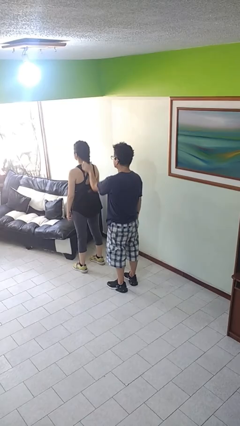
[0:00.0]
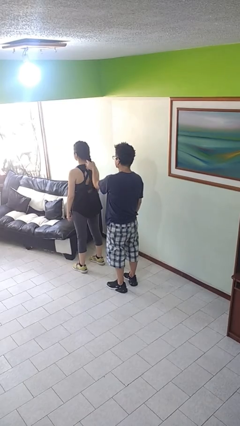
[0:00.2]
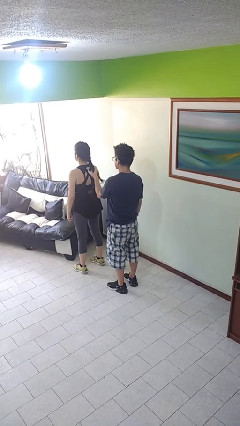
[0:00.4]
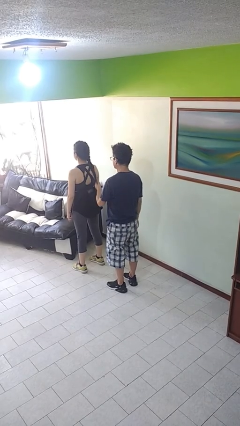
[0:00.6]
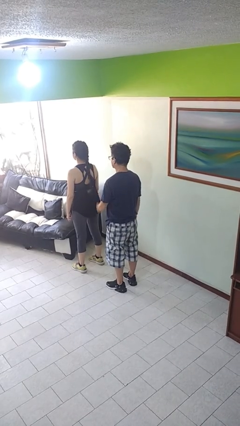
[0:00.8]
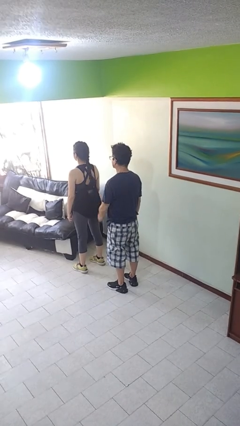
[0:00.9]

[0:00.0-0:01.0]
person grabs person by hair

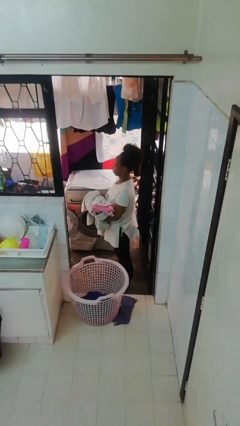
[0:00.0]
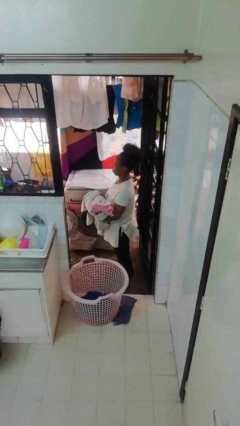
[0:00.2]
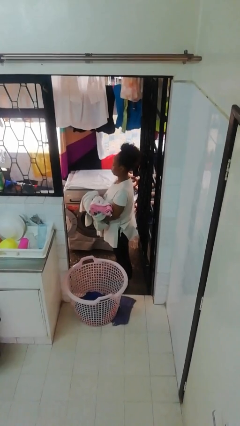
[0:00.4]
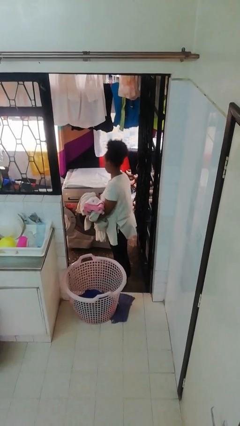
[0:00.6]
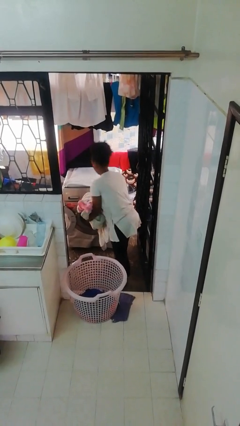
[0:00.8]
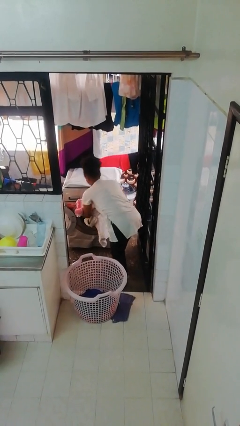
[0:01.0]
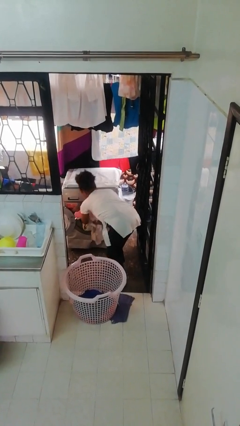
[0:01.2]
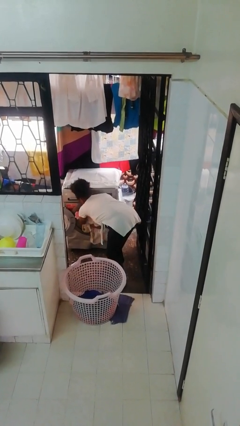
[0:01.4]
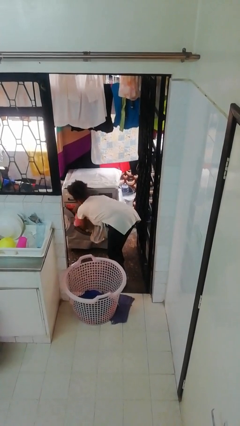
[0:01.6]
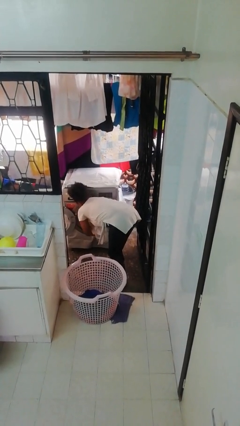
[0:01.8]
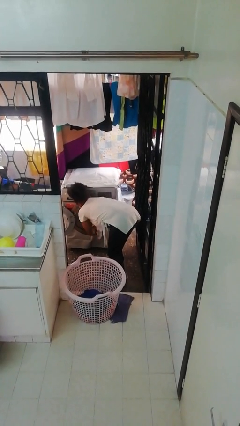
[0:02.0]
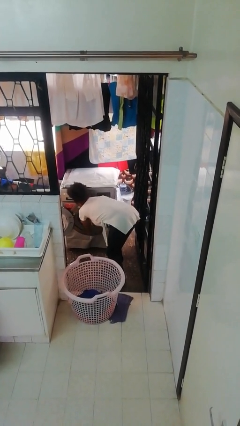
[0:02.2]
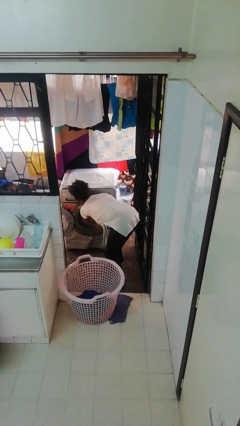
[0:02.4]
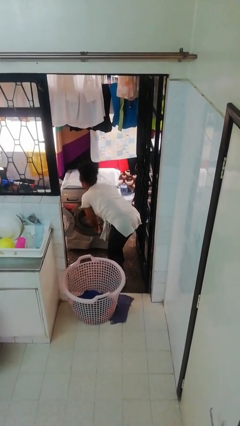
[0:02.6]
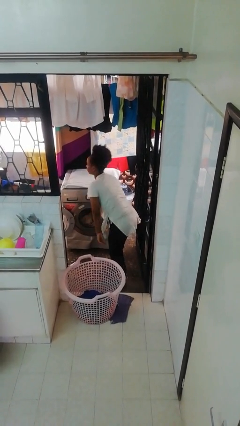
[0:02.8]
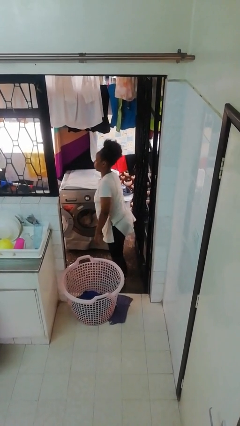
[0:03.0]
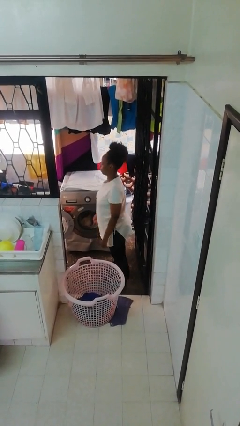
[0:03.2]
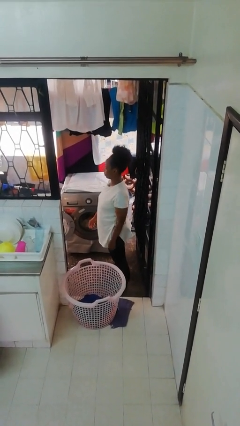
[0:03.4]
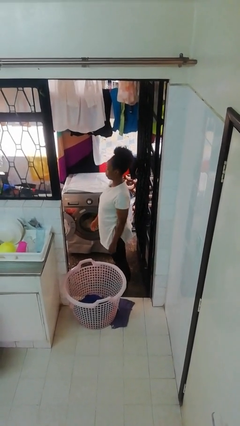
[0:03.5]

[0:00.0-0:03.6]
person loads dryer

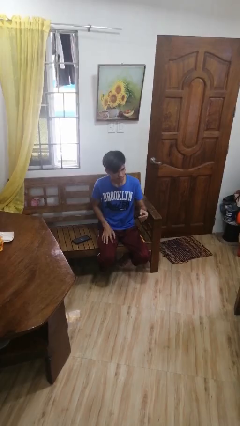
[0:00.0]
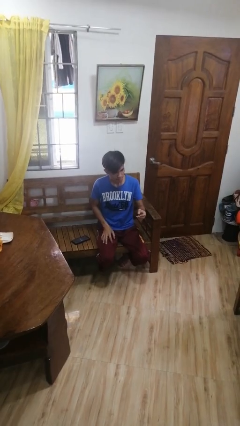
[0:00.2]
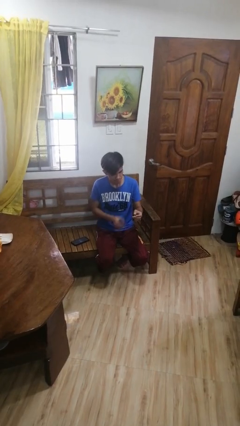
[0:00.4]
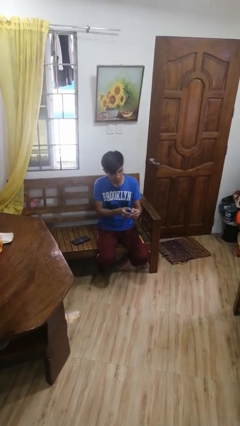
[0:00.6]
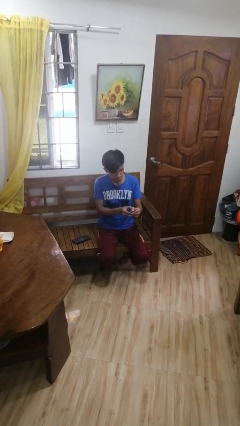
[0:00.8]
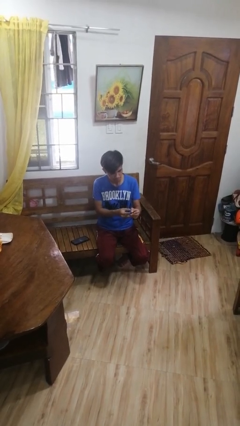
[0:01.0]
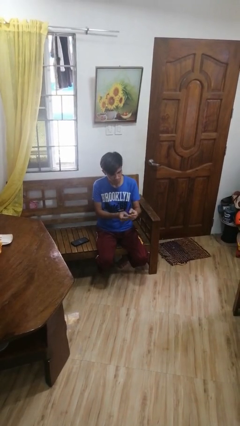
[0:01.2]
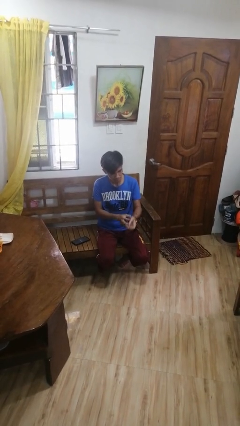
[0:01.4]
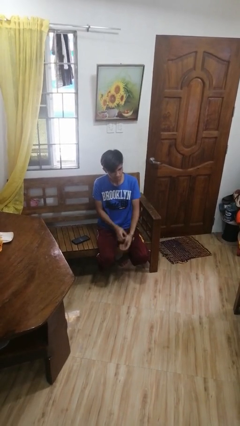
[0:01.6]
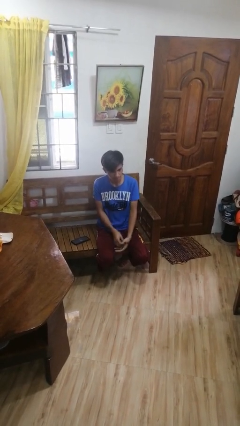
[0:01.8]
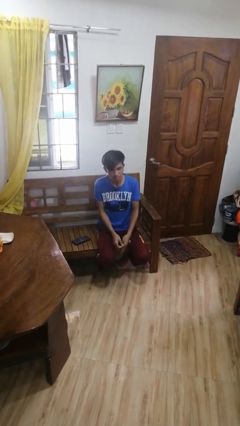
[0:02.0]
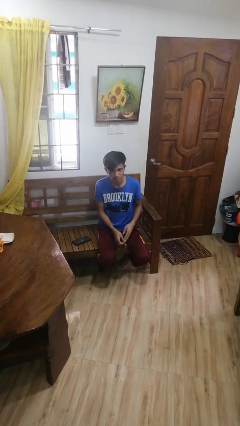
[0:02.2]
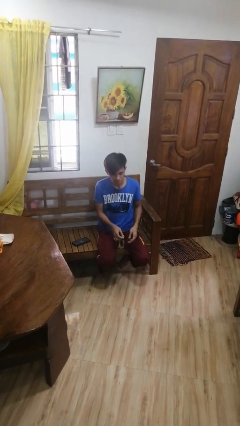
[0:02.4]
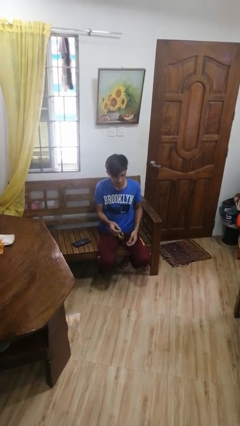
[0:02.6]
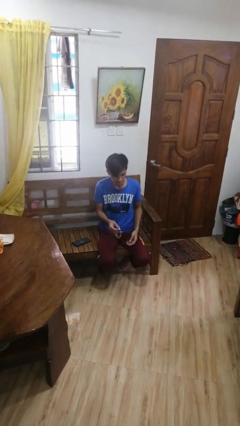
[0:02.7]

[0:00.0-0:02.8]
person takes off wristwatch

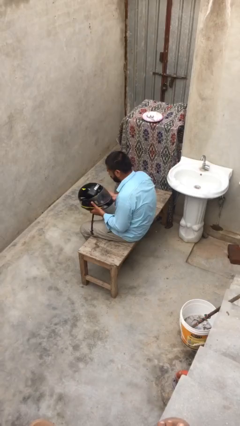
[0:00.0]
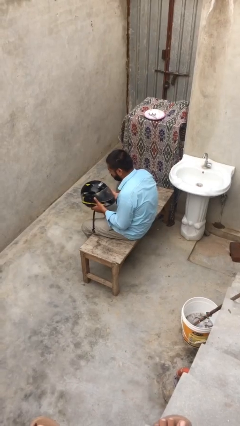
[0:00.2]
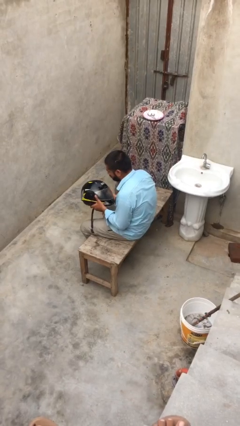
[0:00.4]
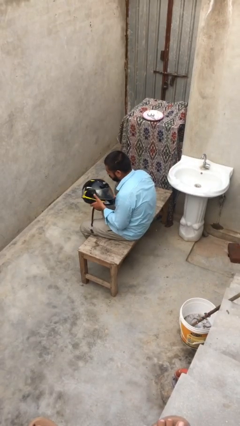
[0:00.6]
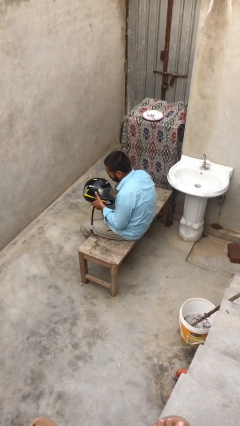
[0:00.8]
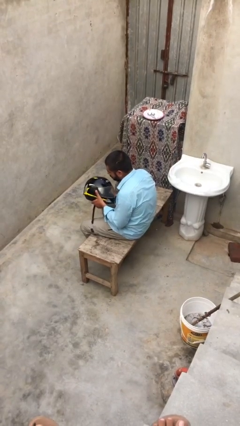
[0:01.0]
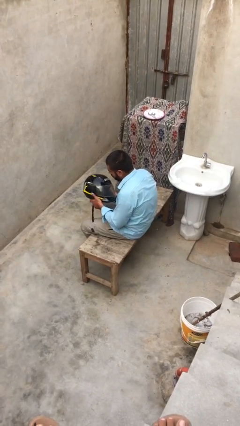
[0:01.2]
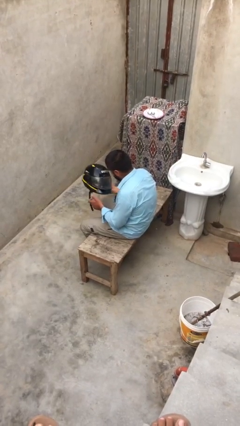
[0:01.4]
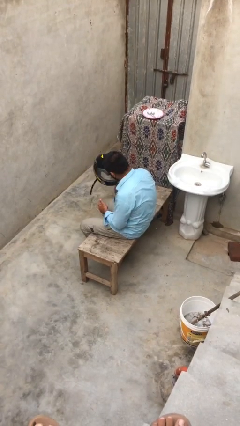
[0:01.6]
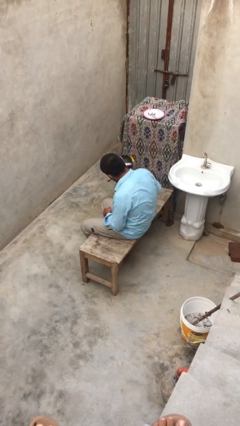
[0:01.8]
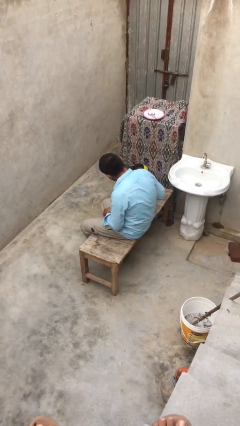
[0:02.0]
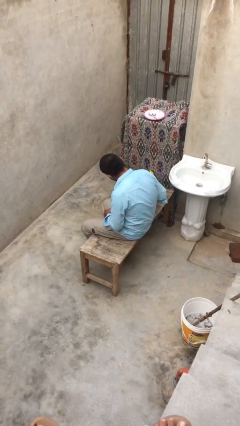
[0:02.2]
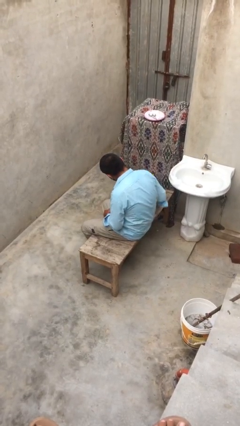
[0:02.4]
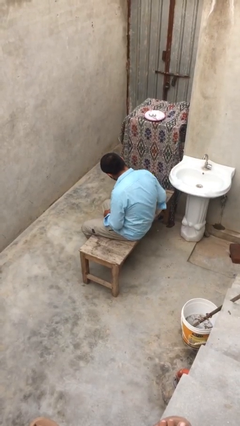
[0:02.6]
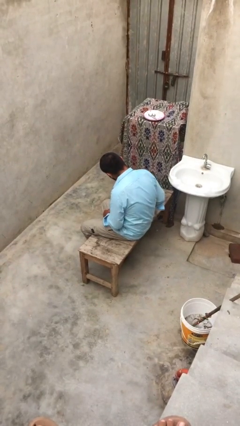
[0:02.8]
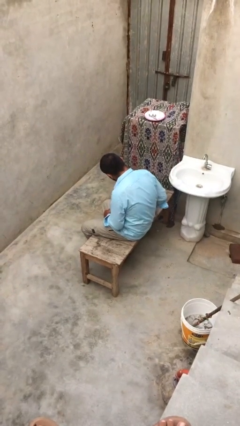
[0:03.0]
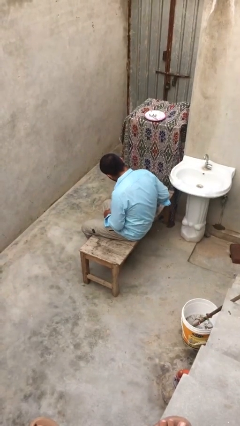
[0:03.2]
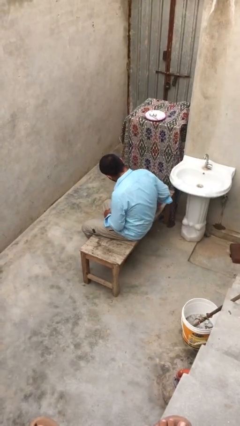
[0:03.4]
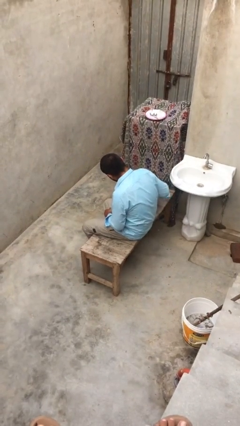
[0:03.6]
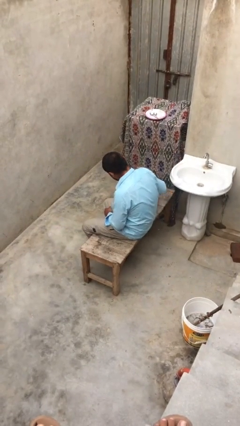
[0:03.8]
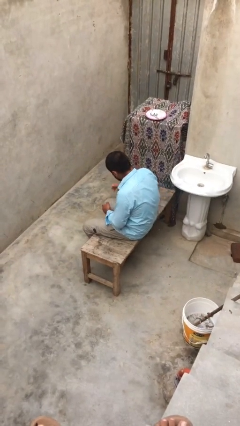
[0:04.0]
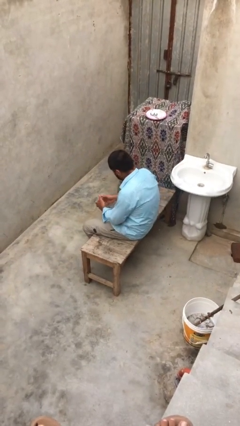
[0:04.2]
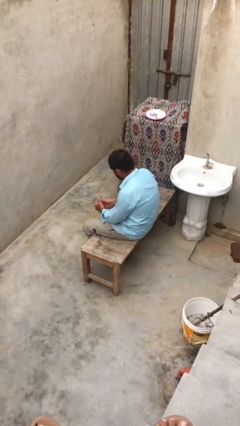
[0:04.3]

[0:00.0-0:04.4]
person puts down object on floor

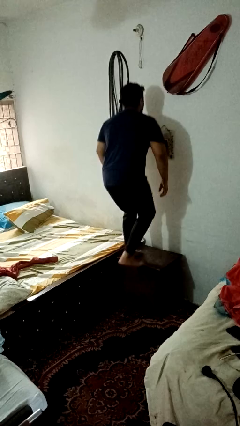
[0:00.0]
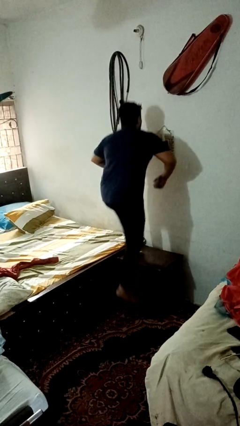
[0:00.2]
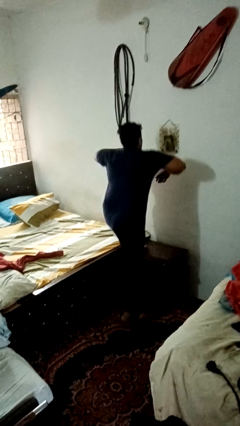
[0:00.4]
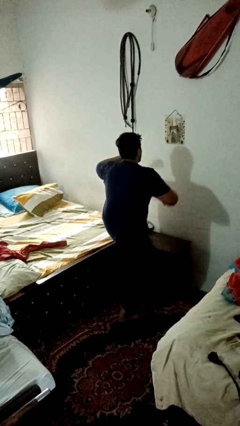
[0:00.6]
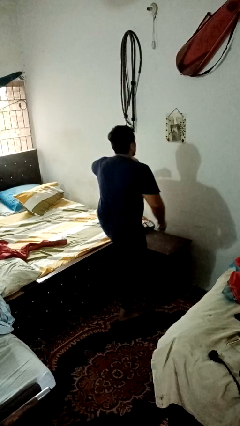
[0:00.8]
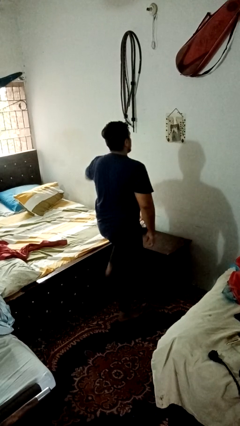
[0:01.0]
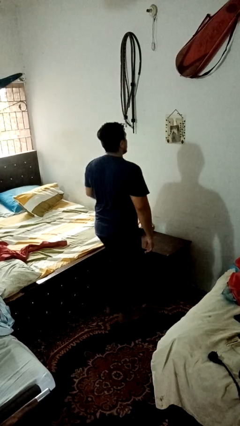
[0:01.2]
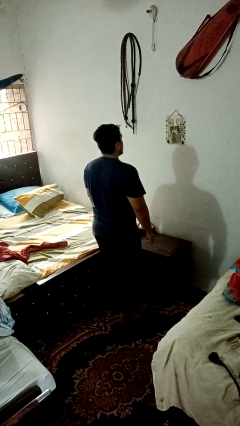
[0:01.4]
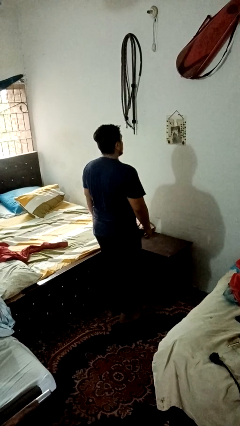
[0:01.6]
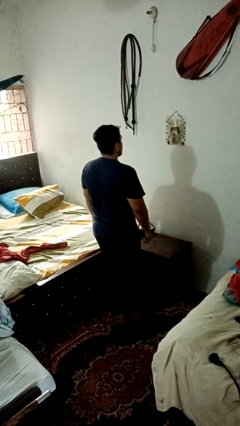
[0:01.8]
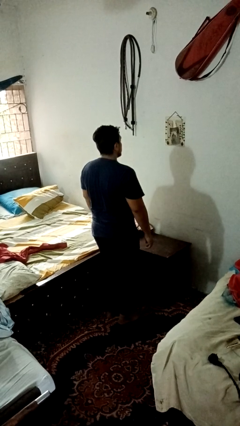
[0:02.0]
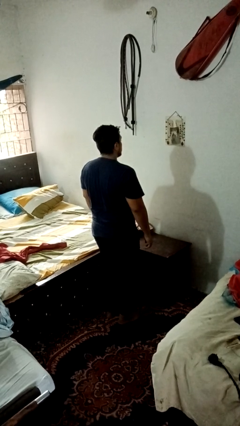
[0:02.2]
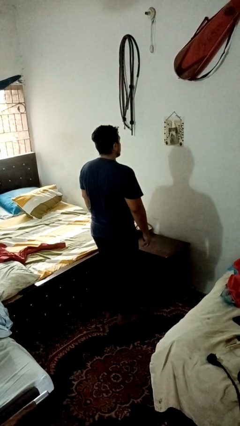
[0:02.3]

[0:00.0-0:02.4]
person climbs off table

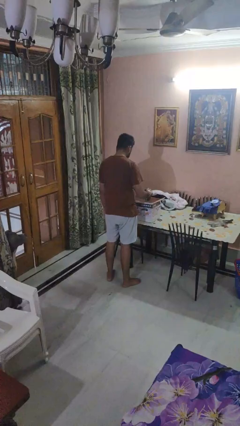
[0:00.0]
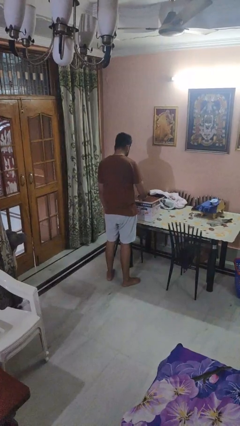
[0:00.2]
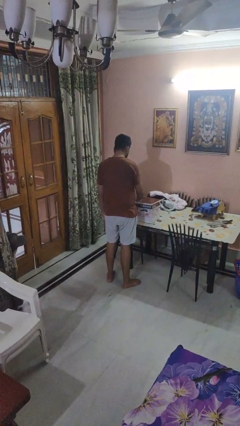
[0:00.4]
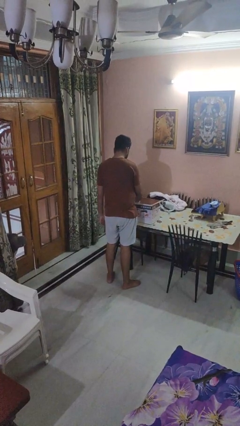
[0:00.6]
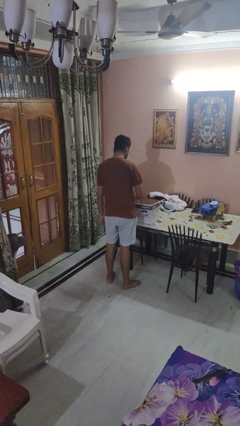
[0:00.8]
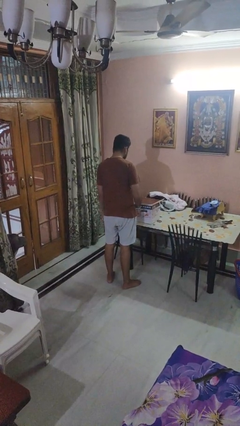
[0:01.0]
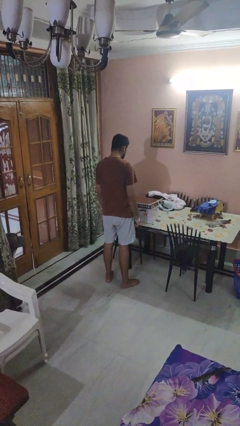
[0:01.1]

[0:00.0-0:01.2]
person puts object into box

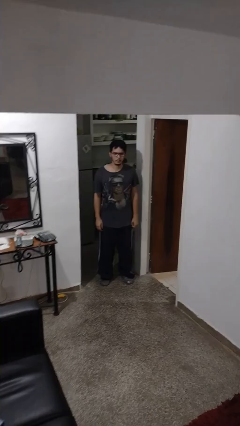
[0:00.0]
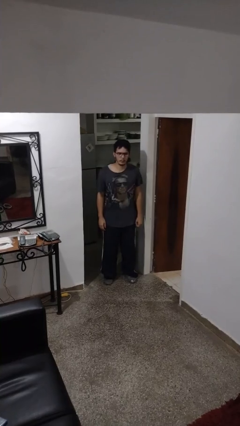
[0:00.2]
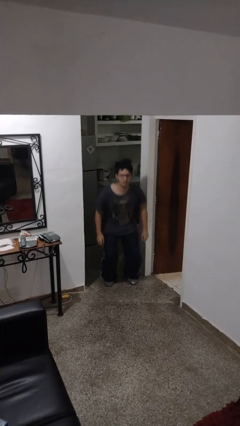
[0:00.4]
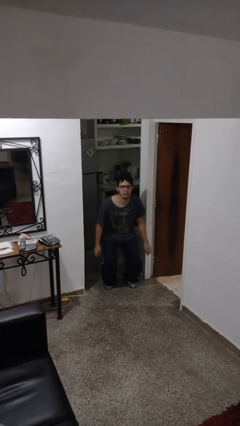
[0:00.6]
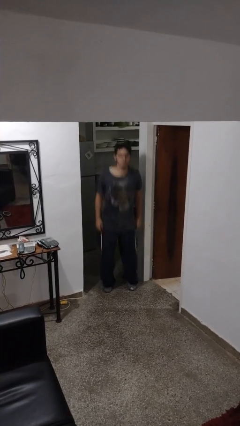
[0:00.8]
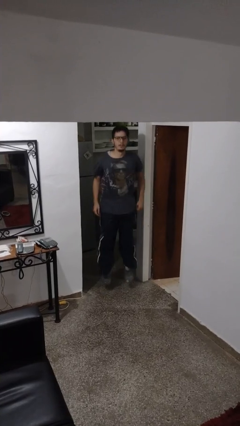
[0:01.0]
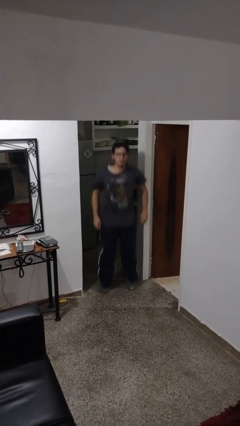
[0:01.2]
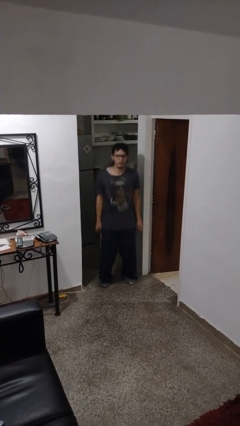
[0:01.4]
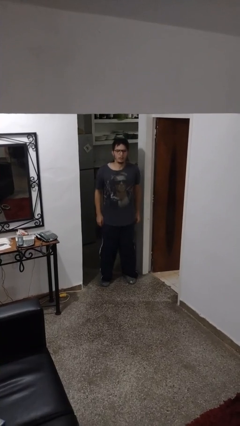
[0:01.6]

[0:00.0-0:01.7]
person jumps

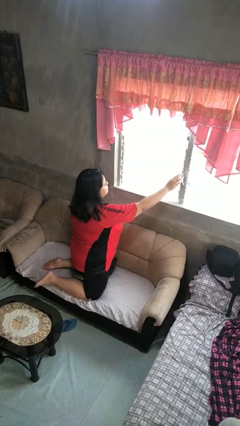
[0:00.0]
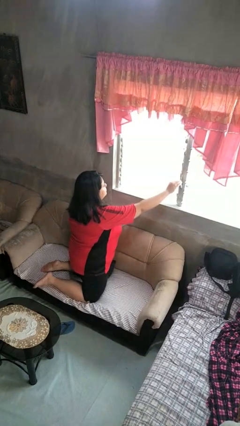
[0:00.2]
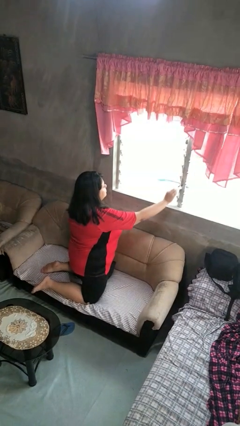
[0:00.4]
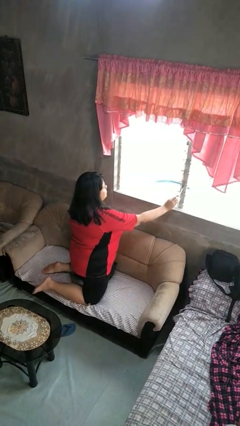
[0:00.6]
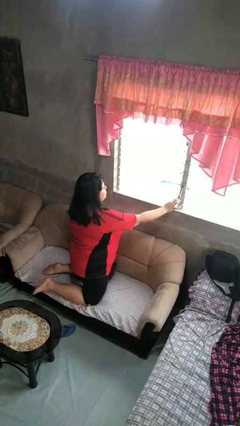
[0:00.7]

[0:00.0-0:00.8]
person opens home window
